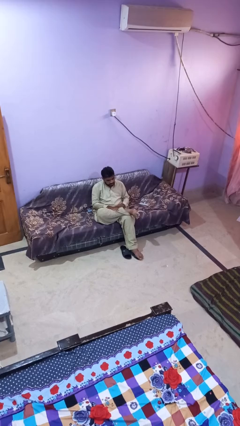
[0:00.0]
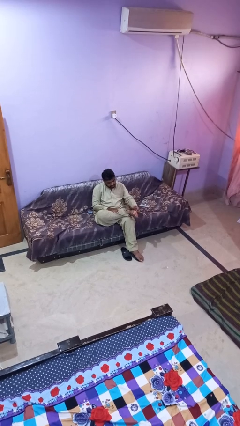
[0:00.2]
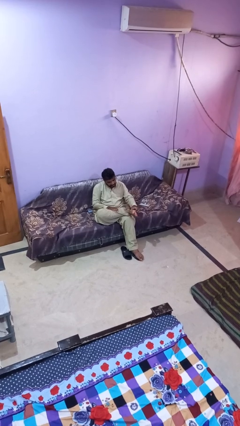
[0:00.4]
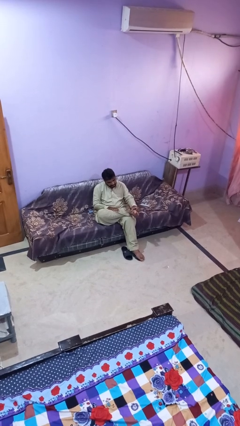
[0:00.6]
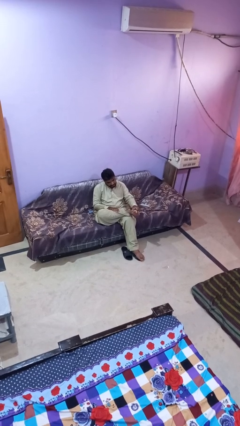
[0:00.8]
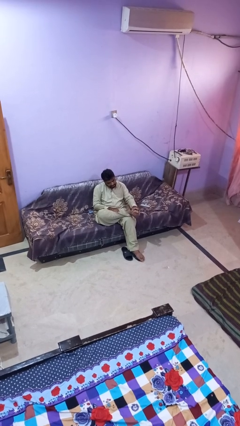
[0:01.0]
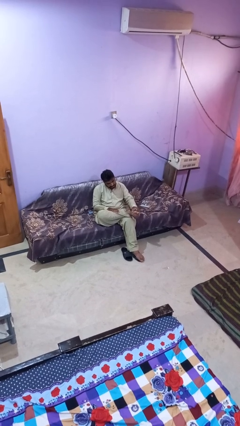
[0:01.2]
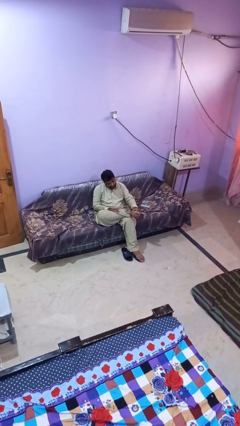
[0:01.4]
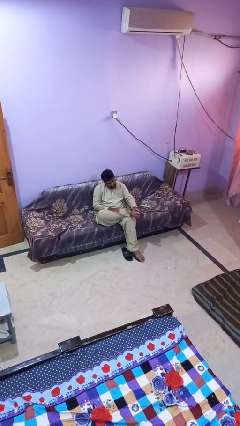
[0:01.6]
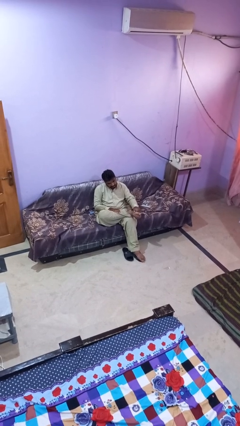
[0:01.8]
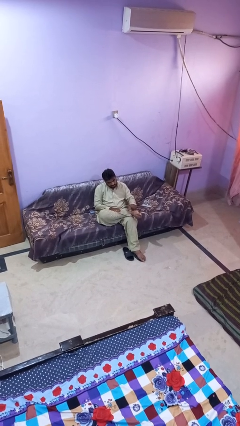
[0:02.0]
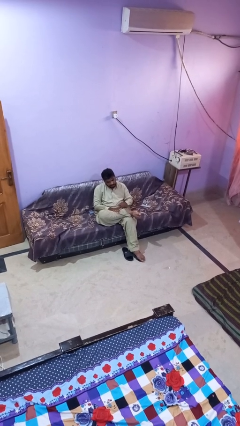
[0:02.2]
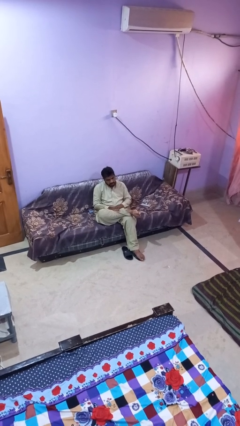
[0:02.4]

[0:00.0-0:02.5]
person rubs foot

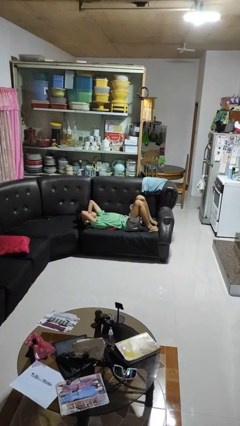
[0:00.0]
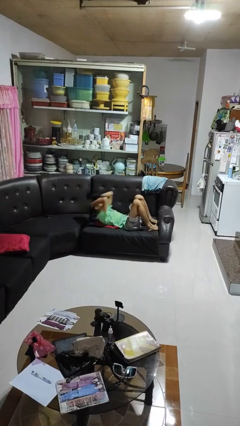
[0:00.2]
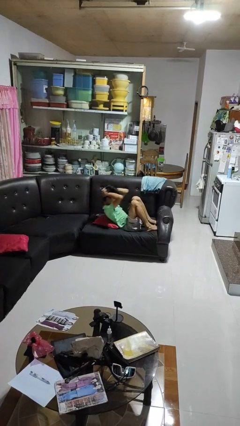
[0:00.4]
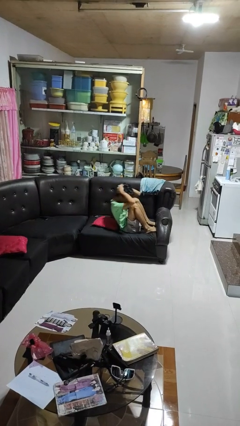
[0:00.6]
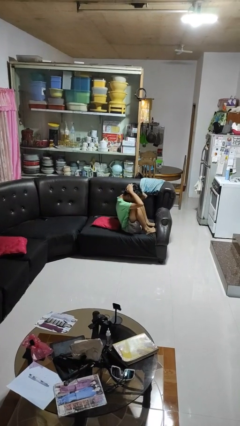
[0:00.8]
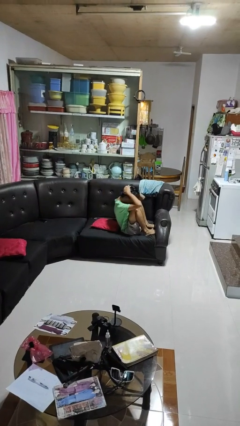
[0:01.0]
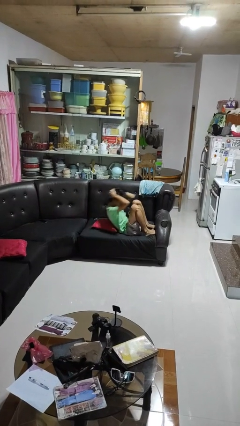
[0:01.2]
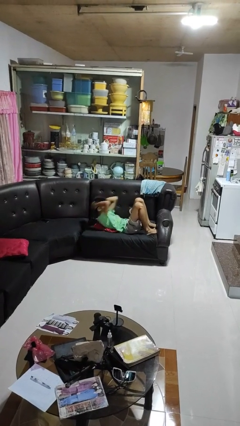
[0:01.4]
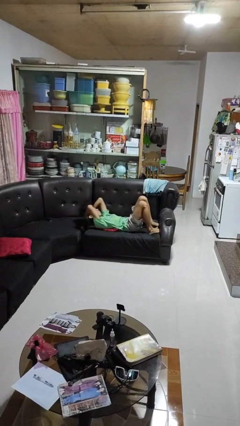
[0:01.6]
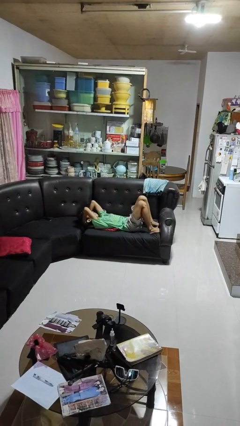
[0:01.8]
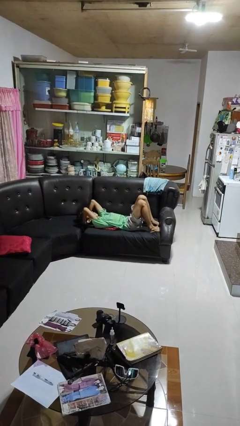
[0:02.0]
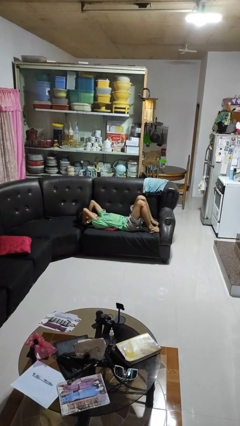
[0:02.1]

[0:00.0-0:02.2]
person exercises with situp

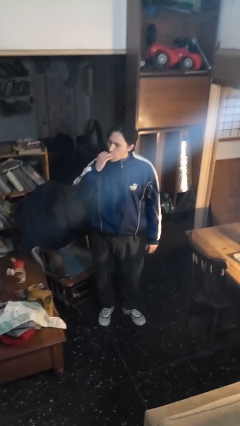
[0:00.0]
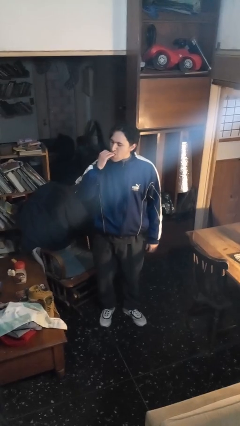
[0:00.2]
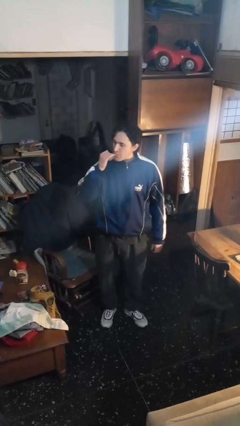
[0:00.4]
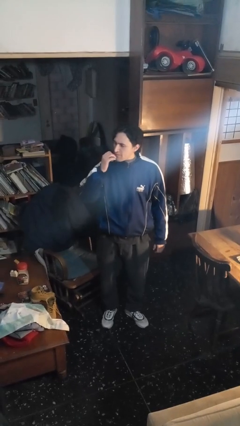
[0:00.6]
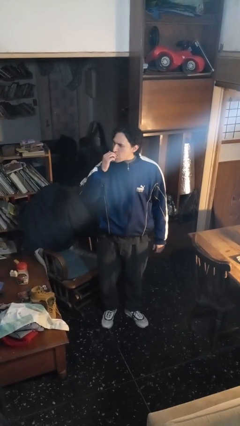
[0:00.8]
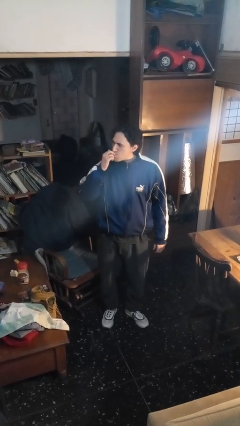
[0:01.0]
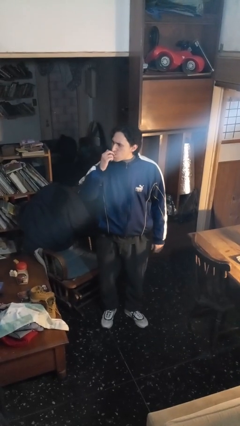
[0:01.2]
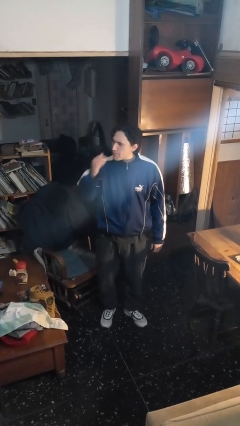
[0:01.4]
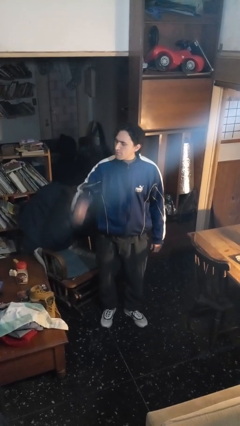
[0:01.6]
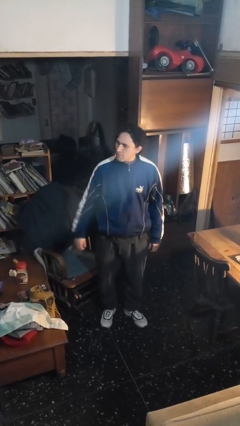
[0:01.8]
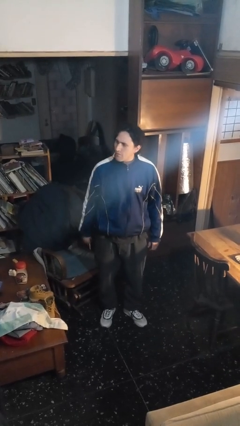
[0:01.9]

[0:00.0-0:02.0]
person licks fingers

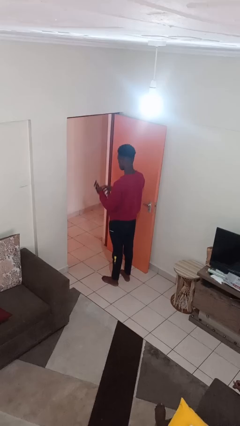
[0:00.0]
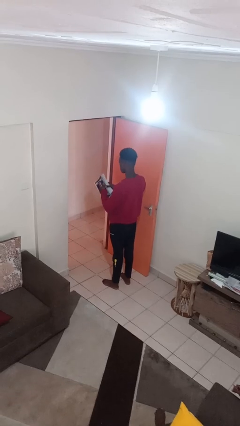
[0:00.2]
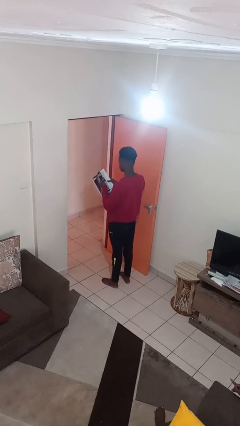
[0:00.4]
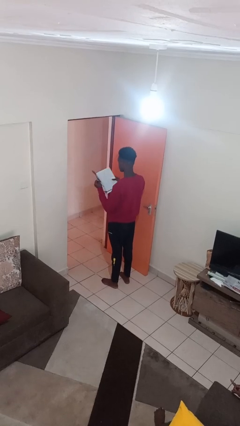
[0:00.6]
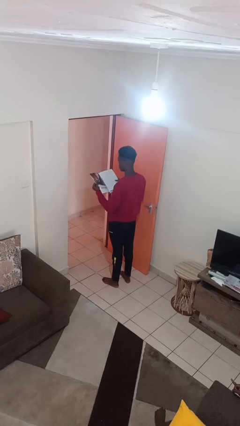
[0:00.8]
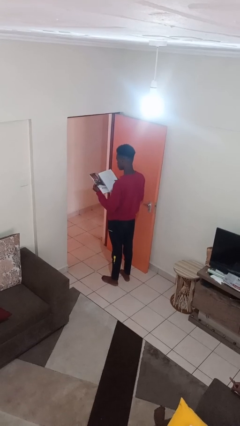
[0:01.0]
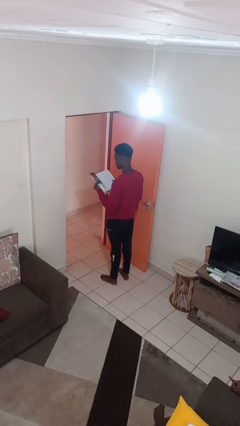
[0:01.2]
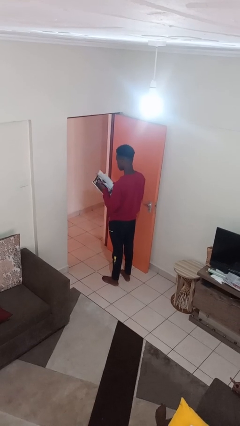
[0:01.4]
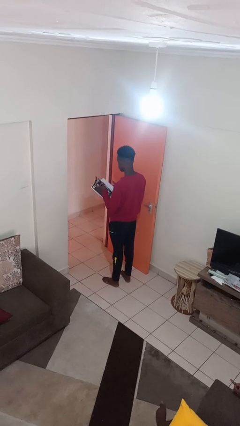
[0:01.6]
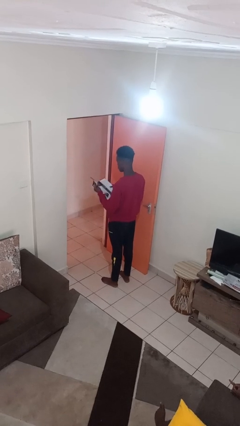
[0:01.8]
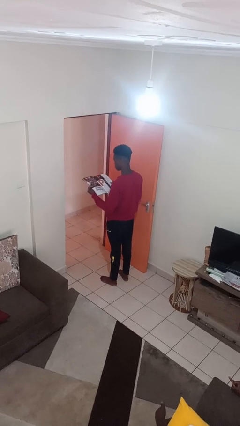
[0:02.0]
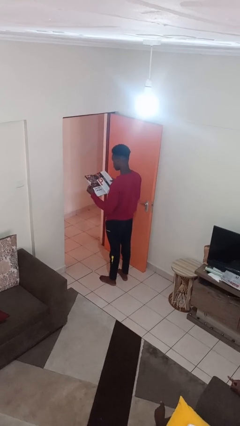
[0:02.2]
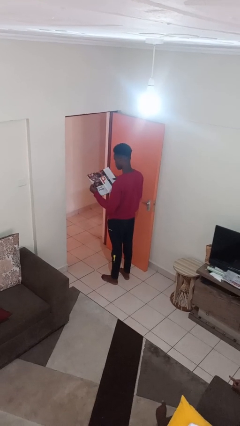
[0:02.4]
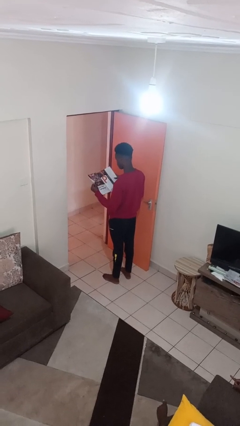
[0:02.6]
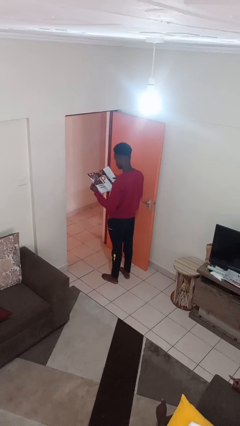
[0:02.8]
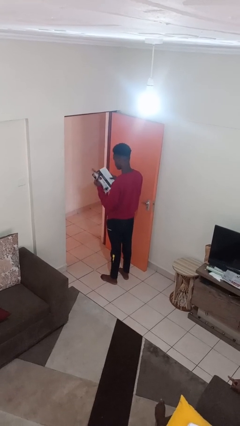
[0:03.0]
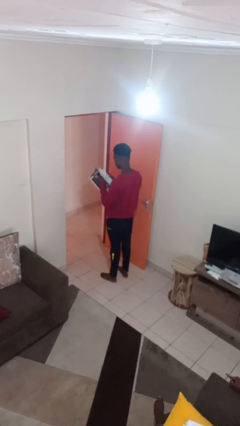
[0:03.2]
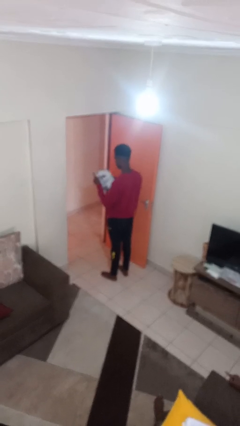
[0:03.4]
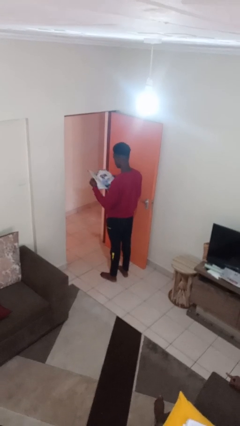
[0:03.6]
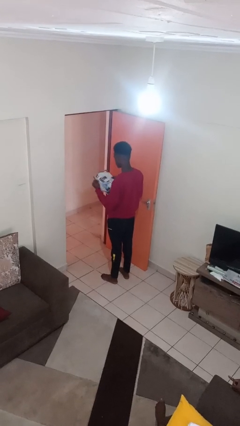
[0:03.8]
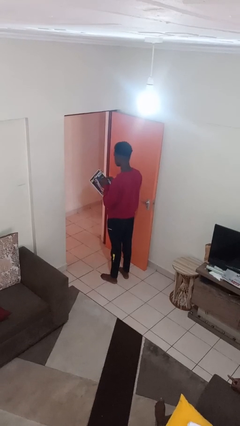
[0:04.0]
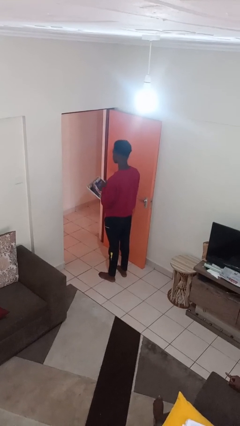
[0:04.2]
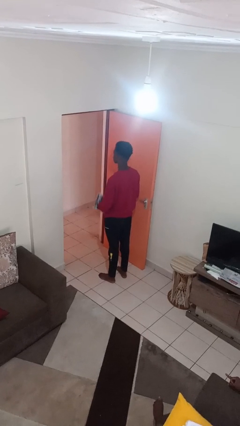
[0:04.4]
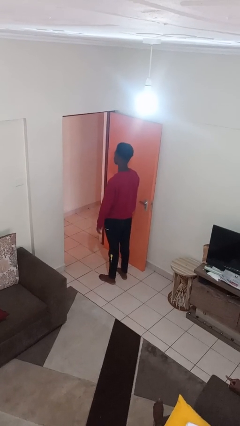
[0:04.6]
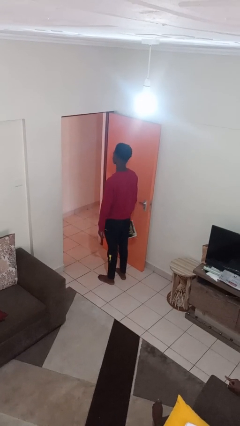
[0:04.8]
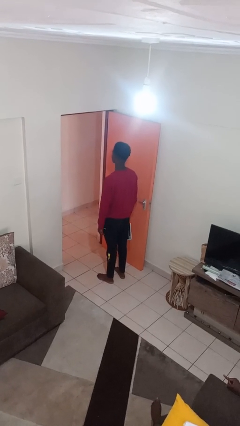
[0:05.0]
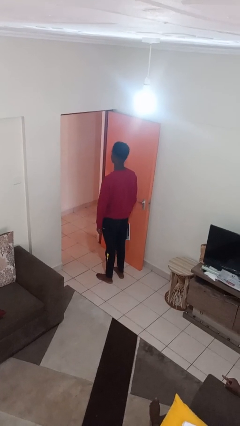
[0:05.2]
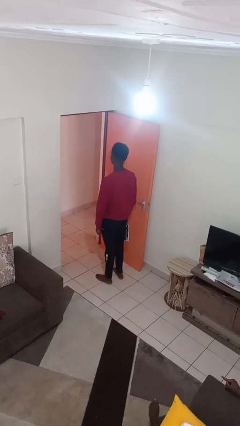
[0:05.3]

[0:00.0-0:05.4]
person reads magazine

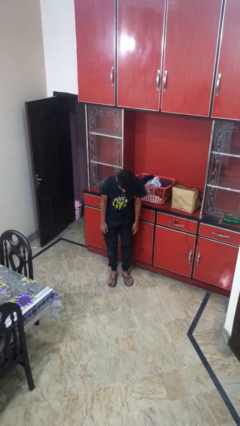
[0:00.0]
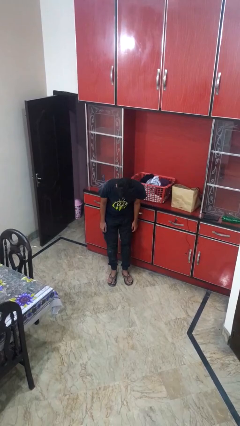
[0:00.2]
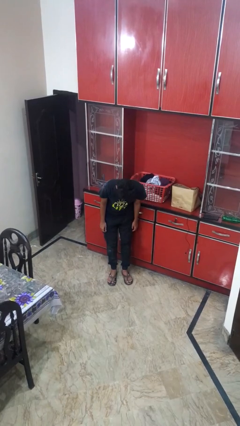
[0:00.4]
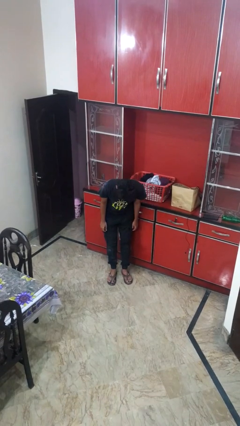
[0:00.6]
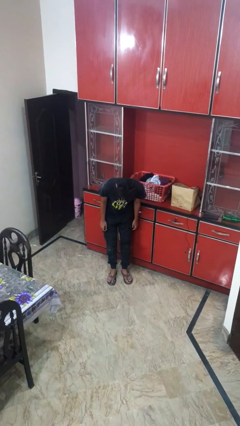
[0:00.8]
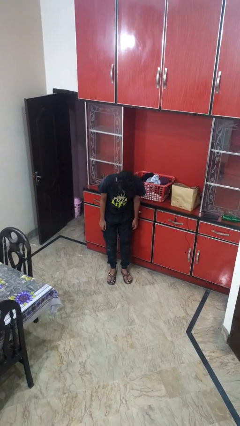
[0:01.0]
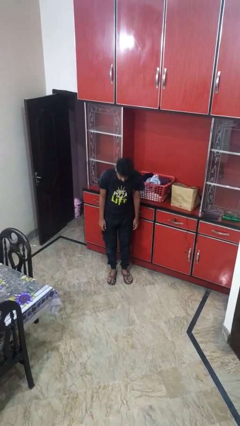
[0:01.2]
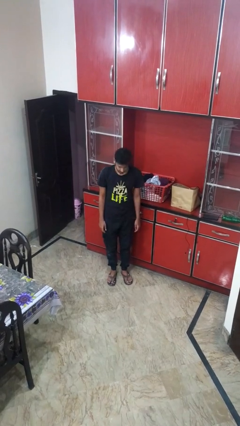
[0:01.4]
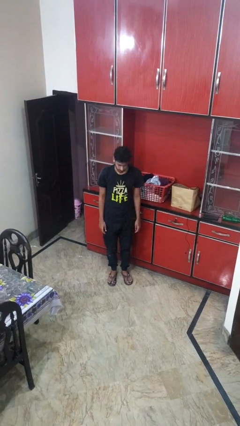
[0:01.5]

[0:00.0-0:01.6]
person bows

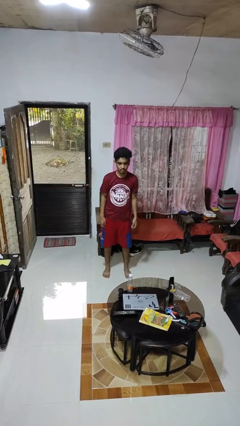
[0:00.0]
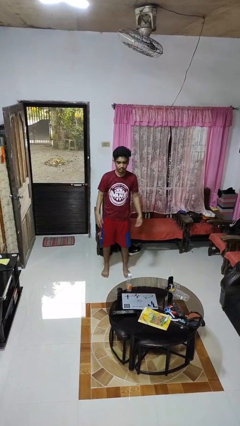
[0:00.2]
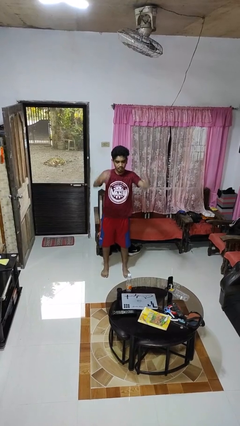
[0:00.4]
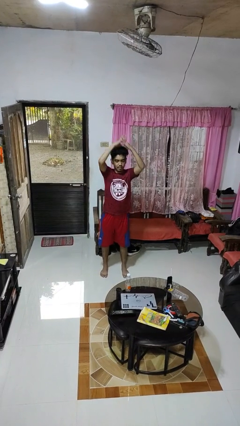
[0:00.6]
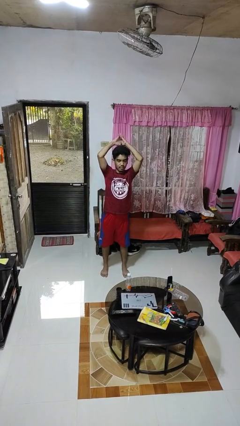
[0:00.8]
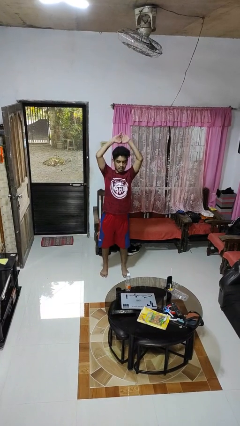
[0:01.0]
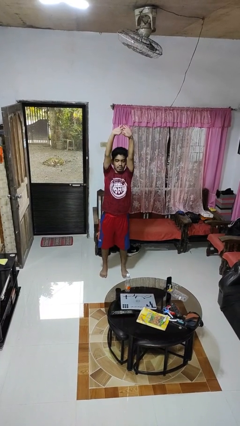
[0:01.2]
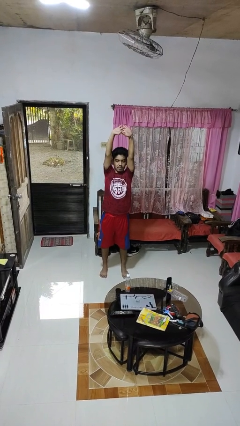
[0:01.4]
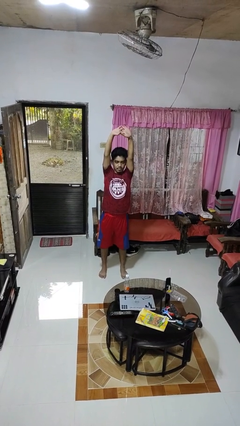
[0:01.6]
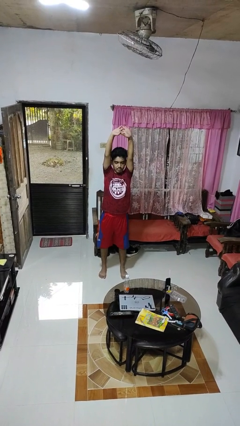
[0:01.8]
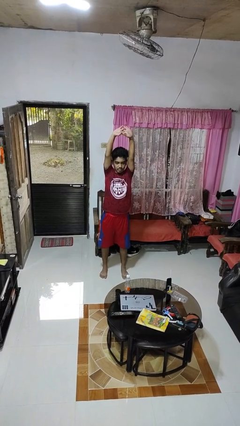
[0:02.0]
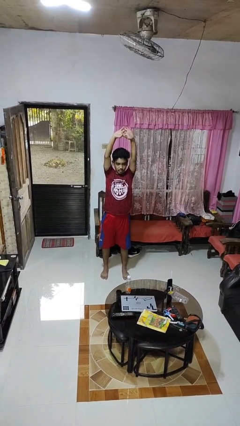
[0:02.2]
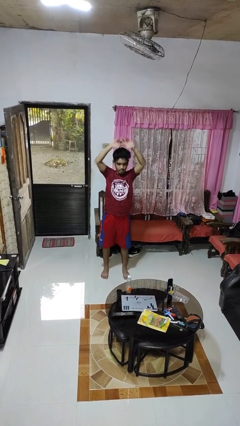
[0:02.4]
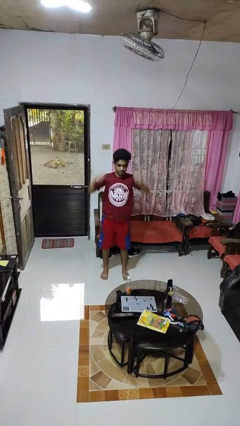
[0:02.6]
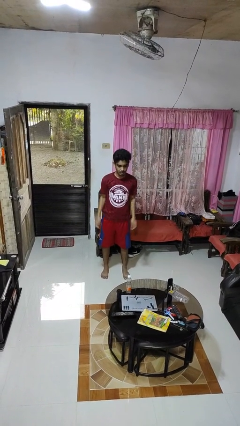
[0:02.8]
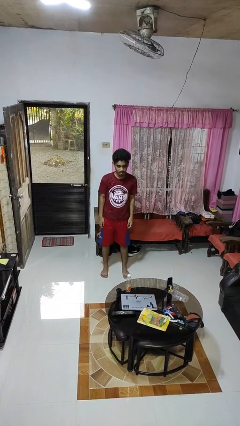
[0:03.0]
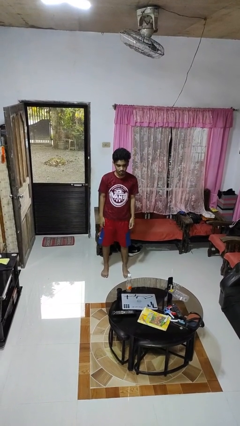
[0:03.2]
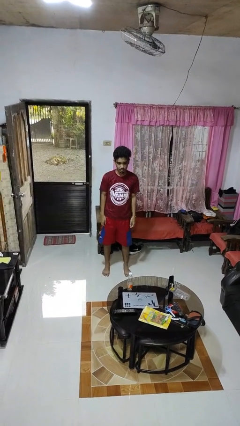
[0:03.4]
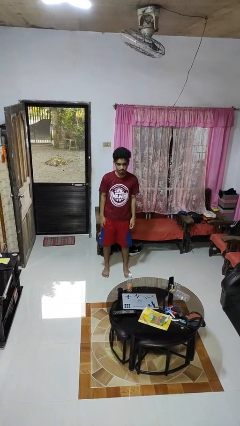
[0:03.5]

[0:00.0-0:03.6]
person stretches arms over head
